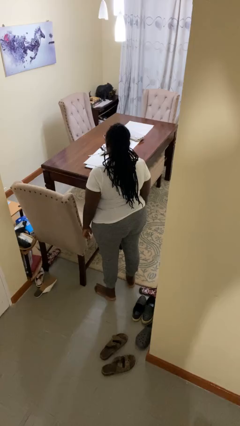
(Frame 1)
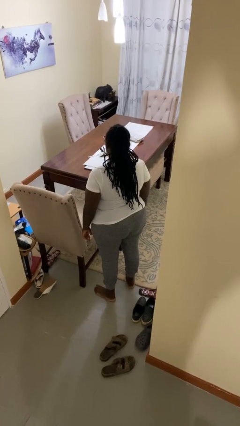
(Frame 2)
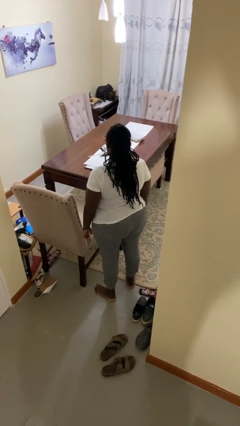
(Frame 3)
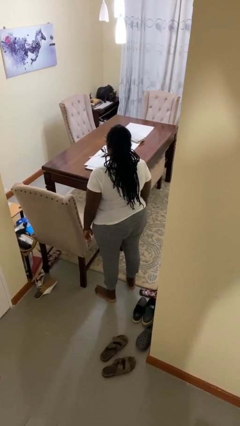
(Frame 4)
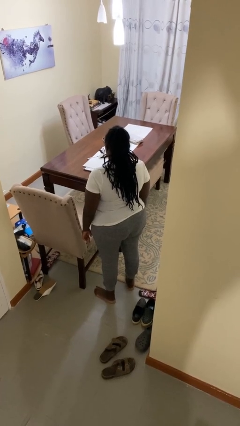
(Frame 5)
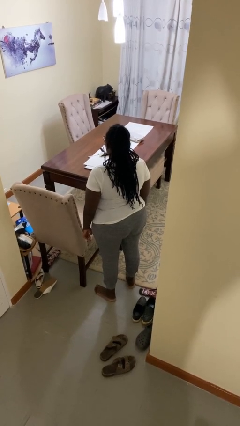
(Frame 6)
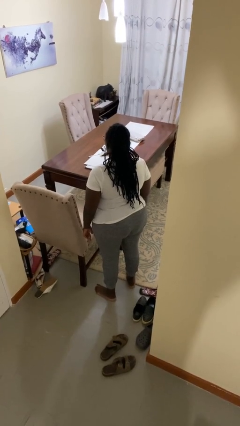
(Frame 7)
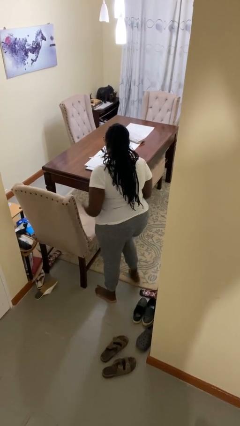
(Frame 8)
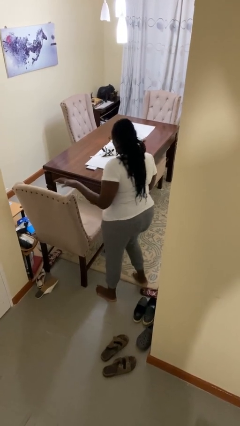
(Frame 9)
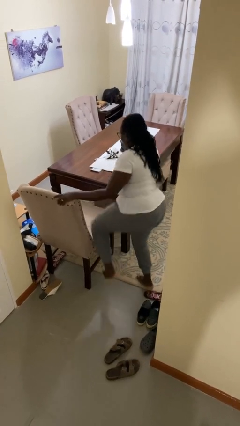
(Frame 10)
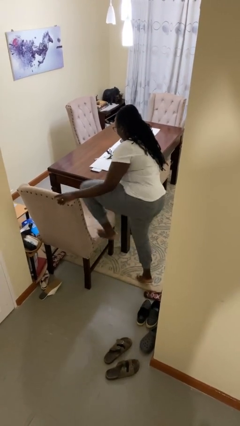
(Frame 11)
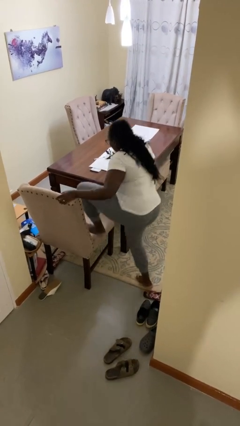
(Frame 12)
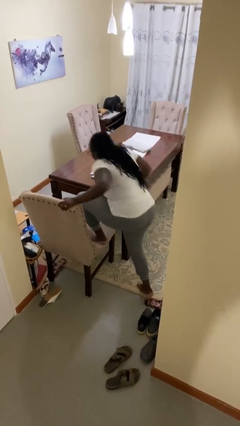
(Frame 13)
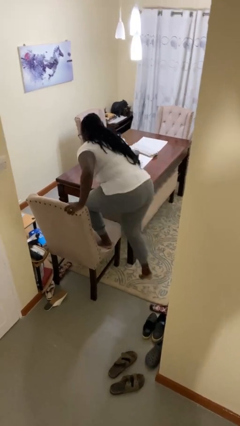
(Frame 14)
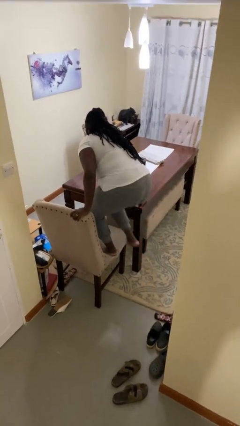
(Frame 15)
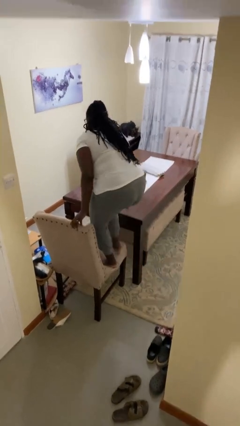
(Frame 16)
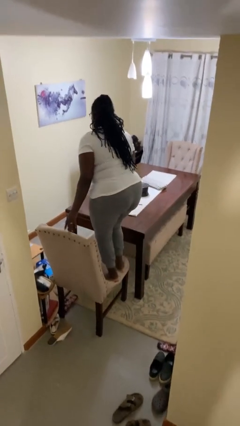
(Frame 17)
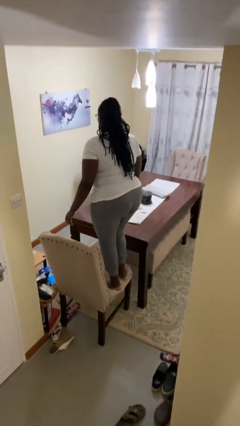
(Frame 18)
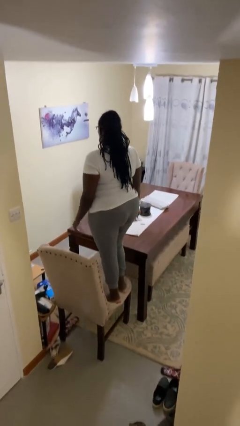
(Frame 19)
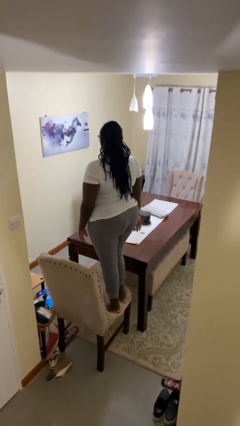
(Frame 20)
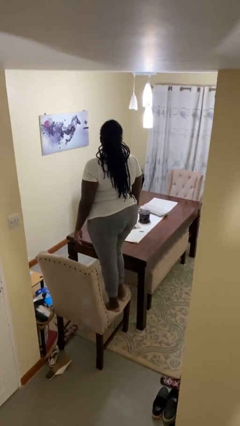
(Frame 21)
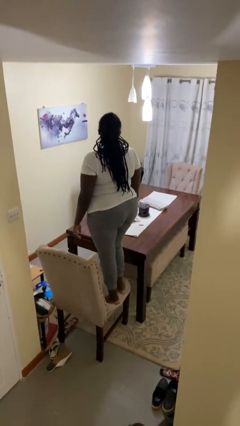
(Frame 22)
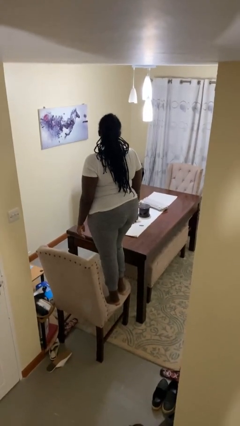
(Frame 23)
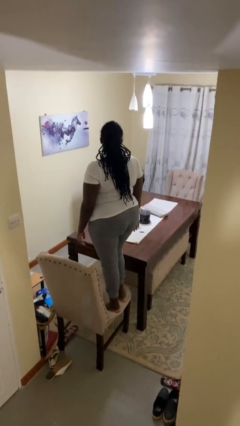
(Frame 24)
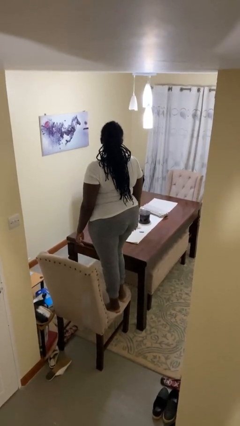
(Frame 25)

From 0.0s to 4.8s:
person climbs on chair

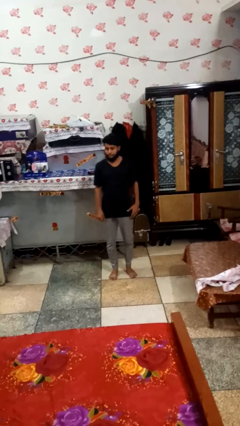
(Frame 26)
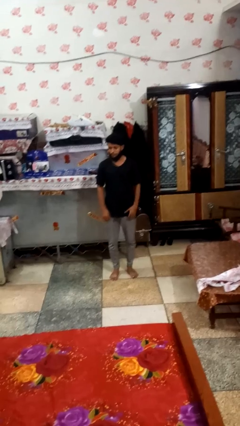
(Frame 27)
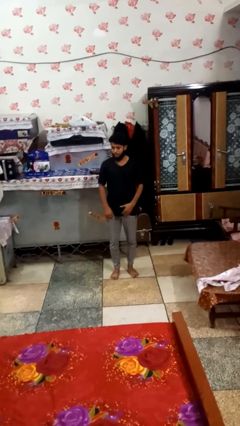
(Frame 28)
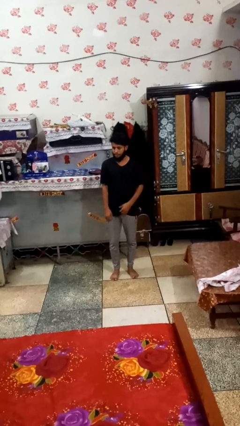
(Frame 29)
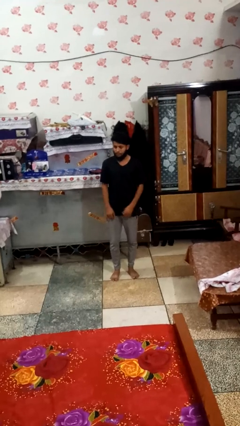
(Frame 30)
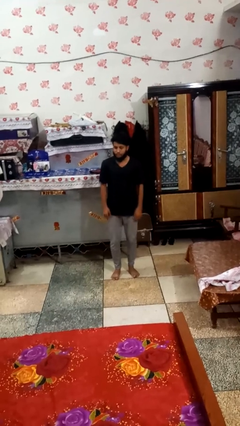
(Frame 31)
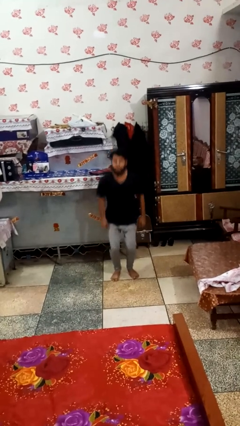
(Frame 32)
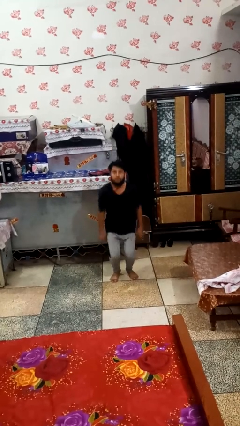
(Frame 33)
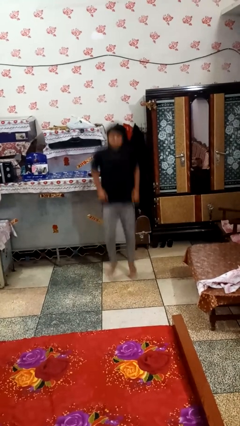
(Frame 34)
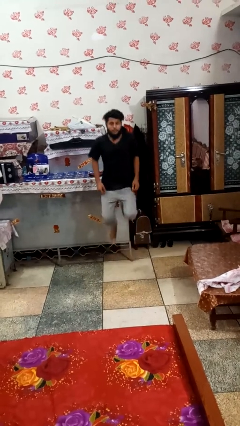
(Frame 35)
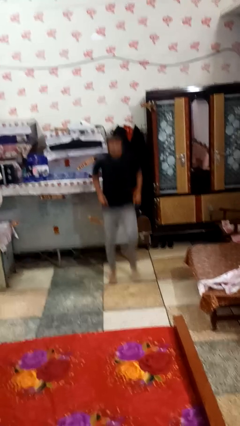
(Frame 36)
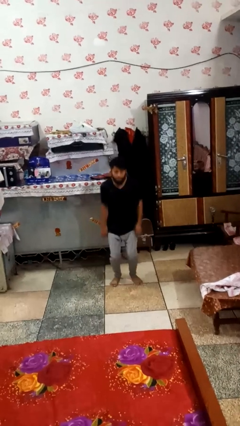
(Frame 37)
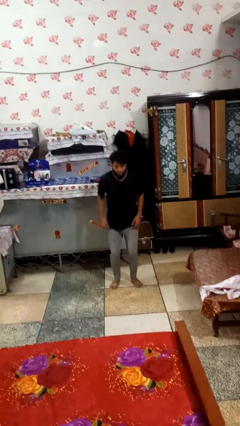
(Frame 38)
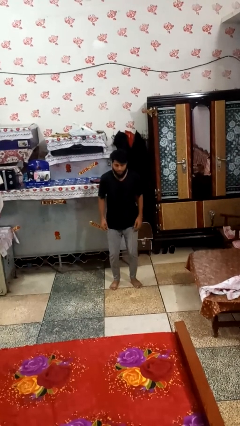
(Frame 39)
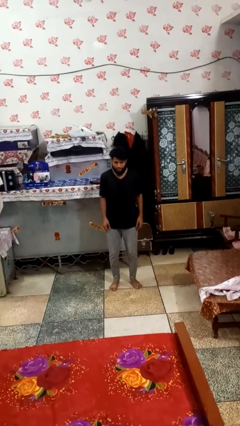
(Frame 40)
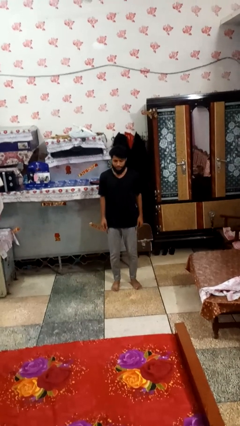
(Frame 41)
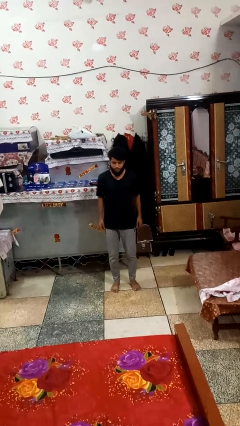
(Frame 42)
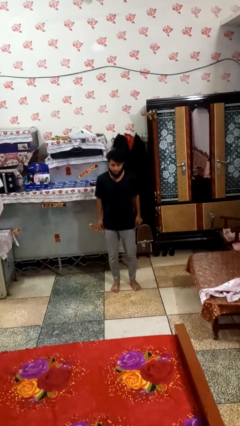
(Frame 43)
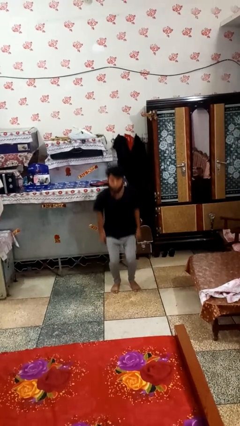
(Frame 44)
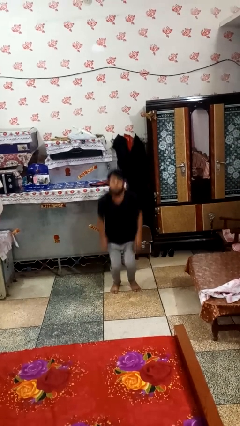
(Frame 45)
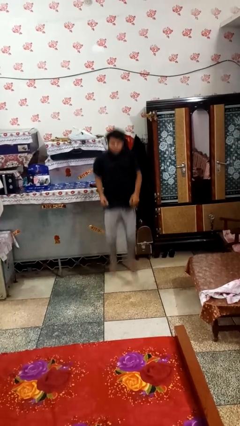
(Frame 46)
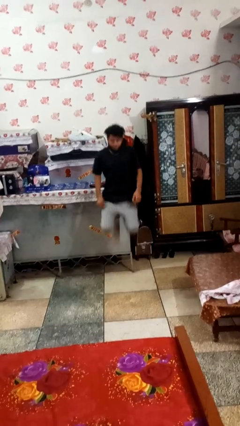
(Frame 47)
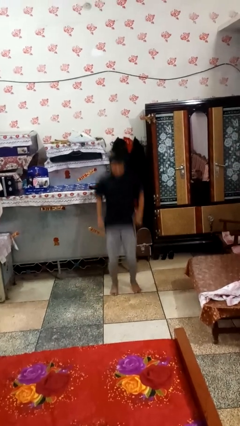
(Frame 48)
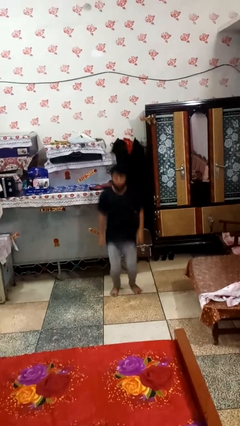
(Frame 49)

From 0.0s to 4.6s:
person jumps

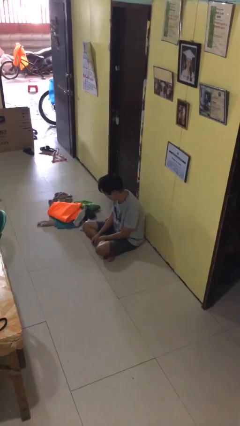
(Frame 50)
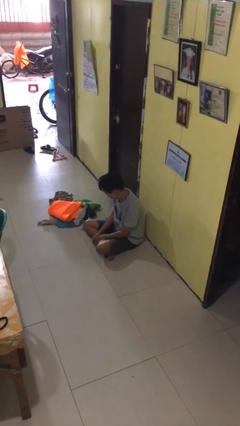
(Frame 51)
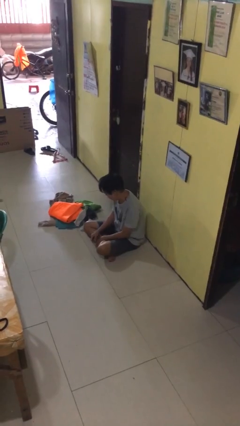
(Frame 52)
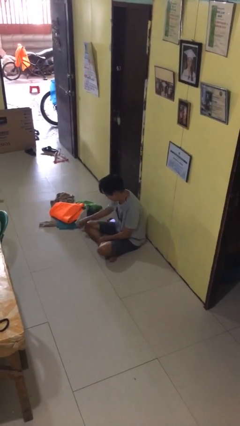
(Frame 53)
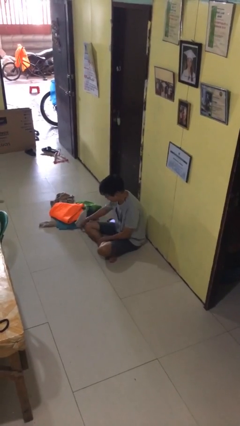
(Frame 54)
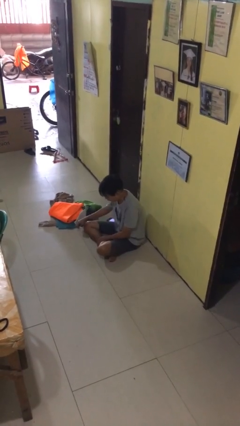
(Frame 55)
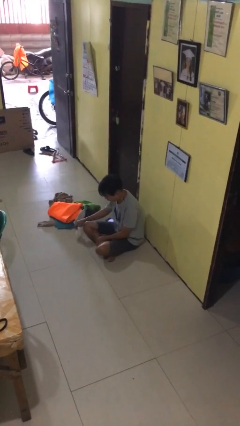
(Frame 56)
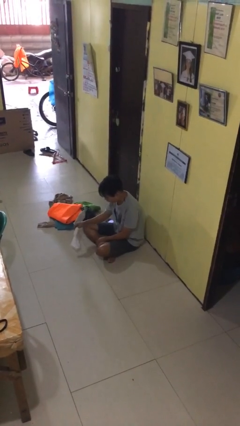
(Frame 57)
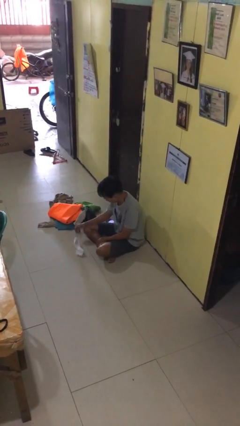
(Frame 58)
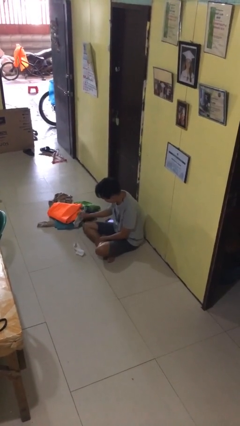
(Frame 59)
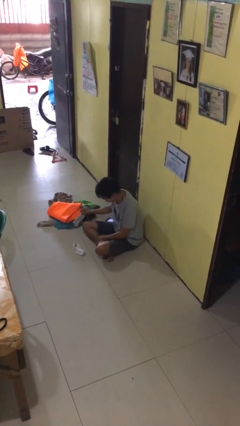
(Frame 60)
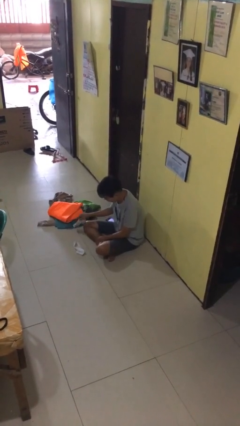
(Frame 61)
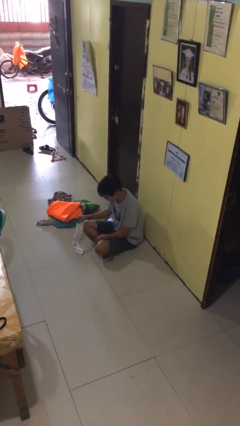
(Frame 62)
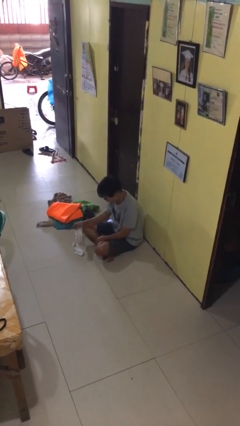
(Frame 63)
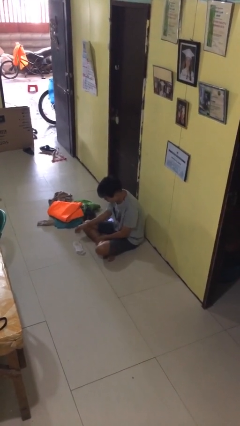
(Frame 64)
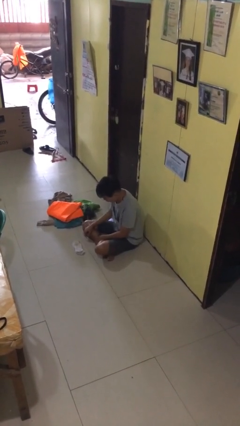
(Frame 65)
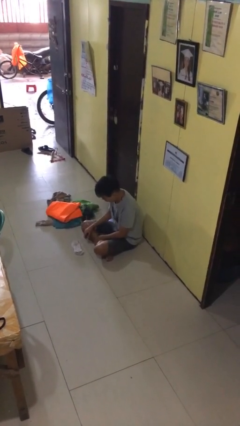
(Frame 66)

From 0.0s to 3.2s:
person folds socks

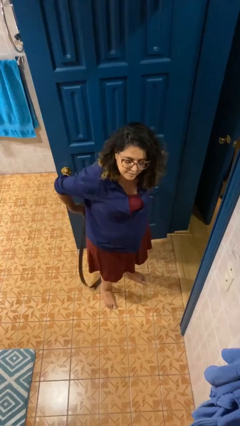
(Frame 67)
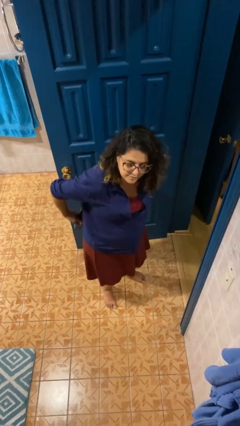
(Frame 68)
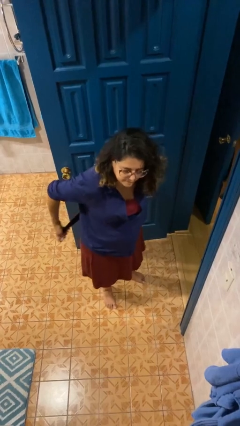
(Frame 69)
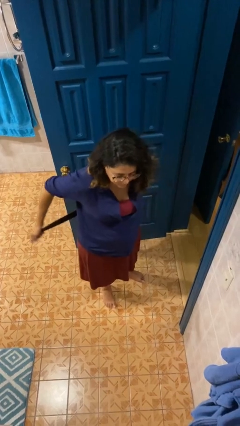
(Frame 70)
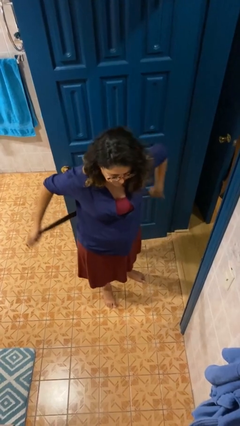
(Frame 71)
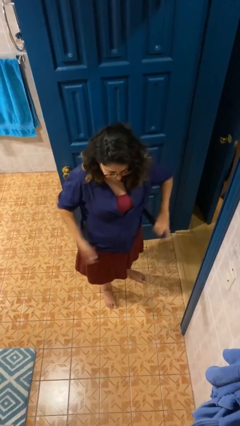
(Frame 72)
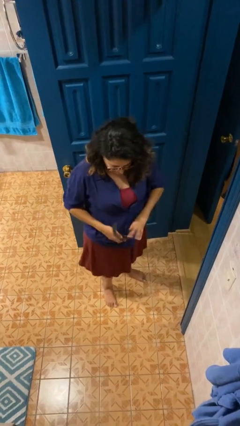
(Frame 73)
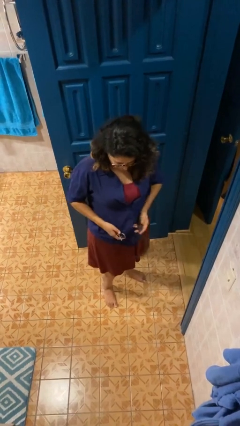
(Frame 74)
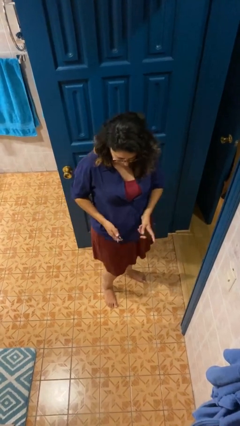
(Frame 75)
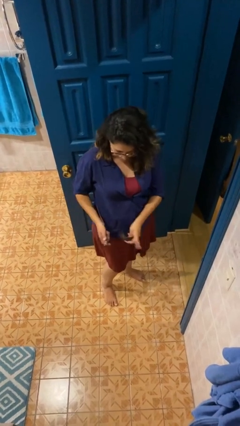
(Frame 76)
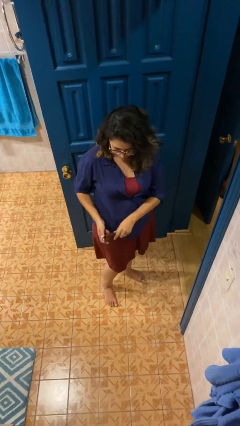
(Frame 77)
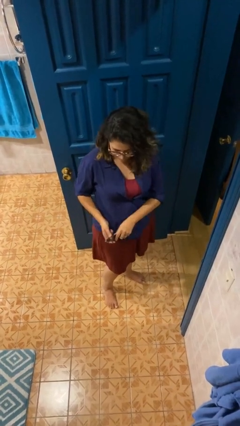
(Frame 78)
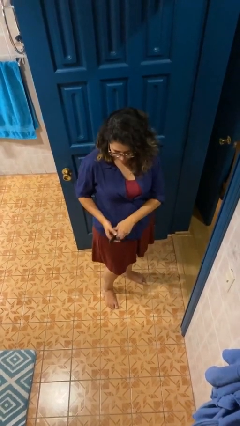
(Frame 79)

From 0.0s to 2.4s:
person puts on belt

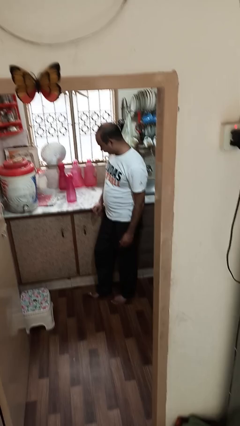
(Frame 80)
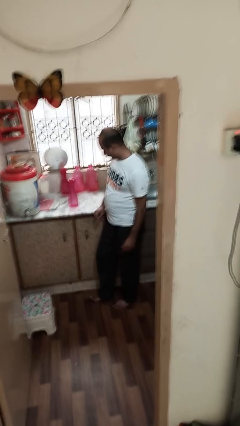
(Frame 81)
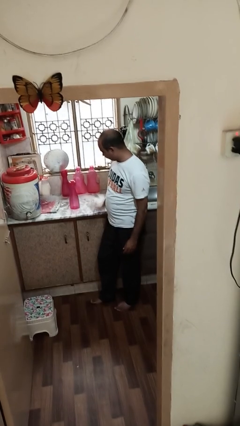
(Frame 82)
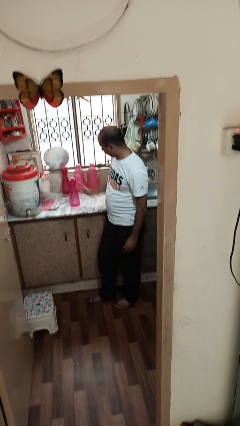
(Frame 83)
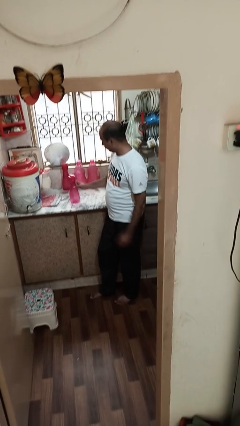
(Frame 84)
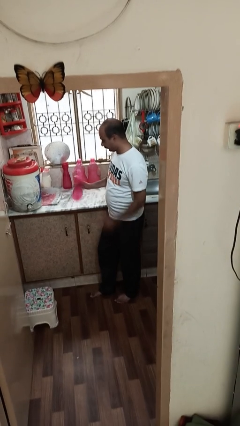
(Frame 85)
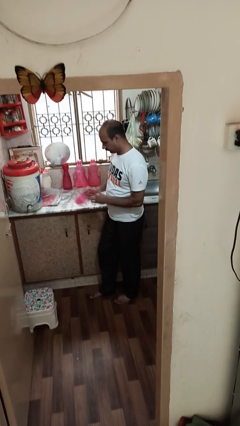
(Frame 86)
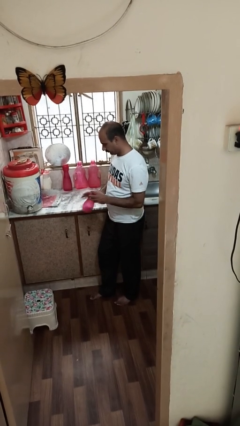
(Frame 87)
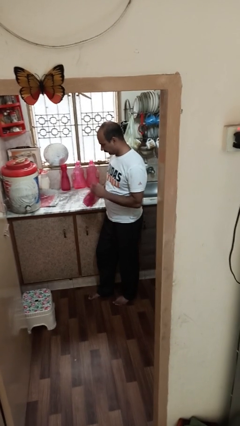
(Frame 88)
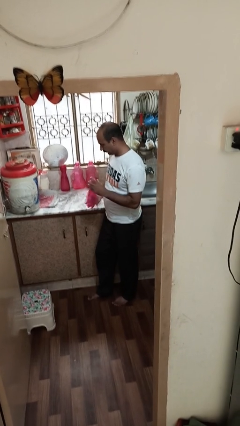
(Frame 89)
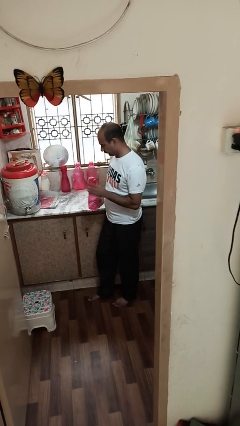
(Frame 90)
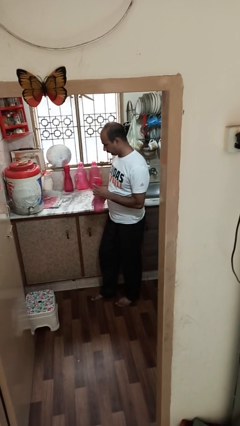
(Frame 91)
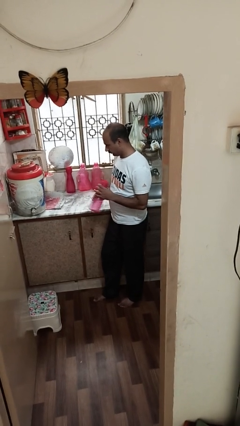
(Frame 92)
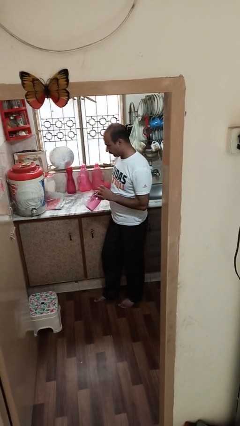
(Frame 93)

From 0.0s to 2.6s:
person picks up object from countertop
